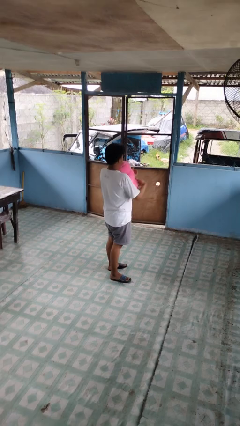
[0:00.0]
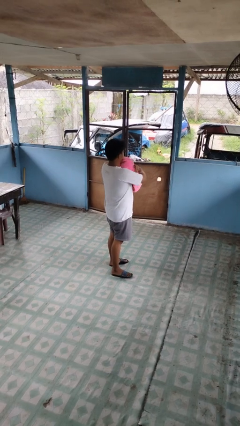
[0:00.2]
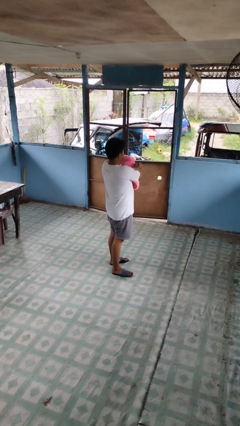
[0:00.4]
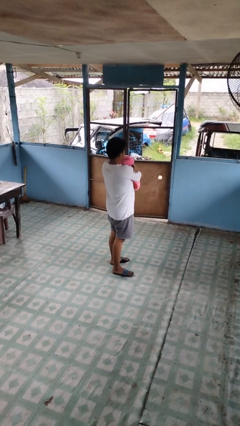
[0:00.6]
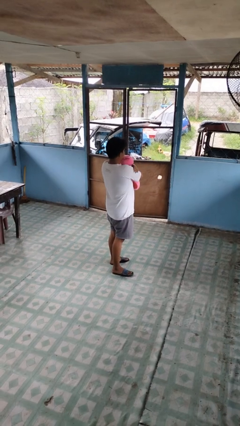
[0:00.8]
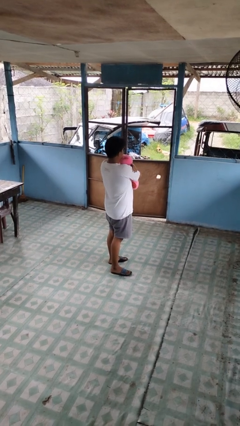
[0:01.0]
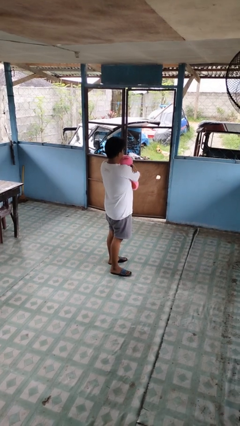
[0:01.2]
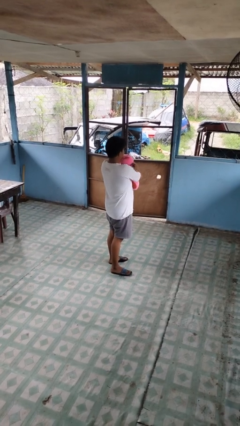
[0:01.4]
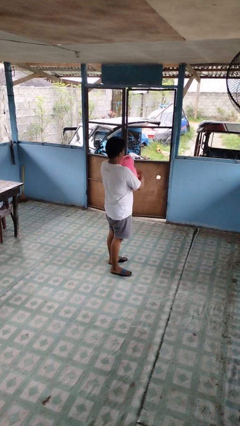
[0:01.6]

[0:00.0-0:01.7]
person hugs stuffed animal

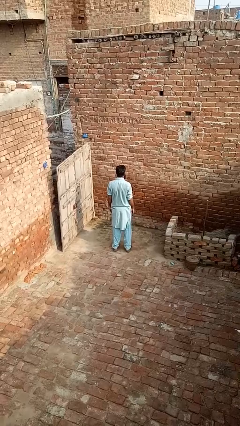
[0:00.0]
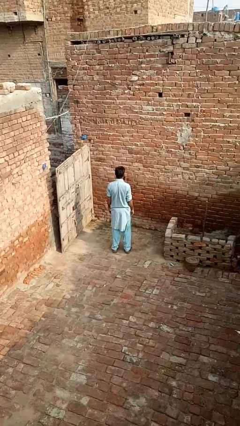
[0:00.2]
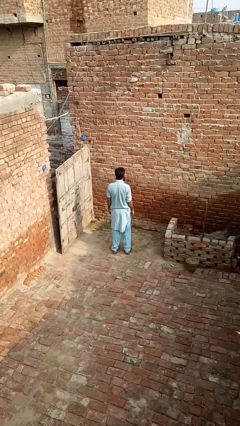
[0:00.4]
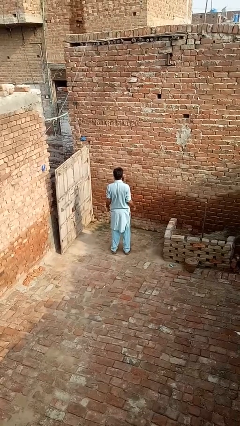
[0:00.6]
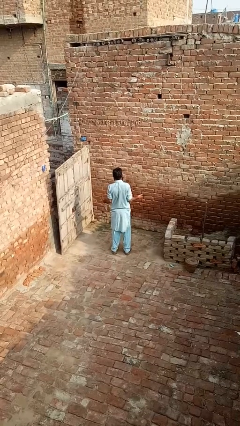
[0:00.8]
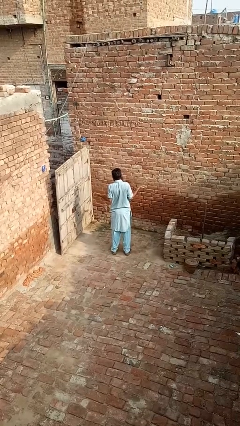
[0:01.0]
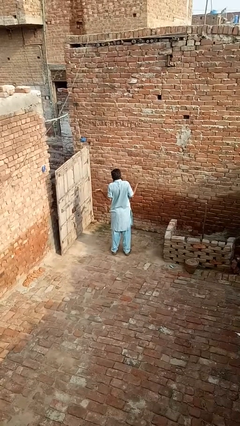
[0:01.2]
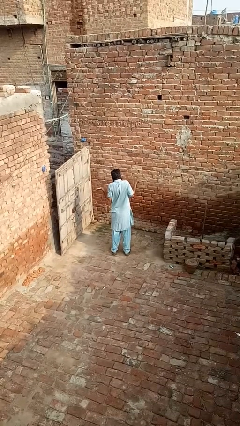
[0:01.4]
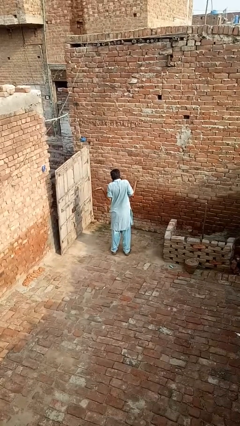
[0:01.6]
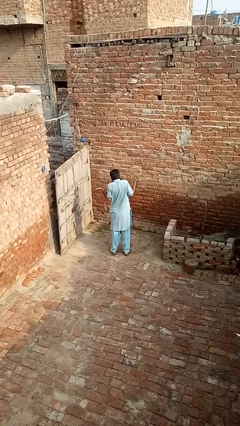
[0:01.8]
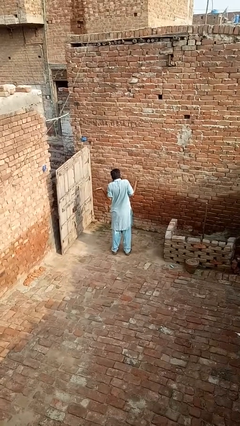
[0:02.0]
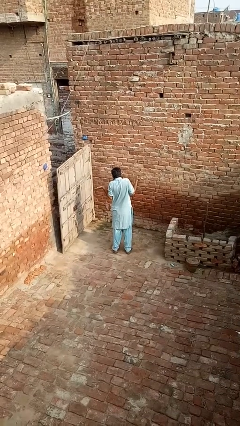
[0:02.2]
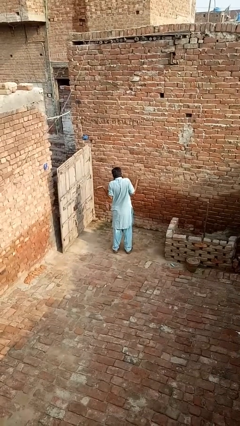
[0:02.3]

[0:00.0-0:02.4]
person shrugs

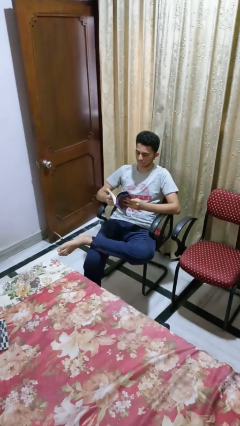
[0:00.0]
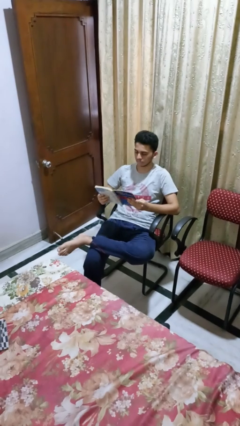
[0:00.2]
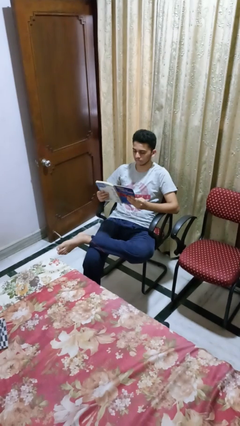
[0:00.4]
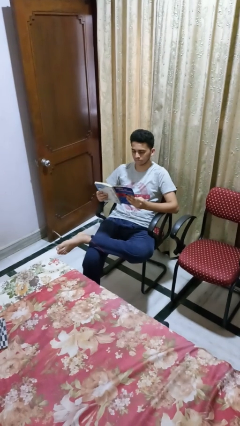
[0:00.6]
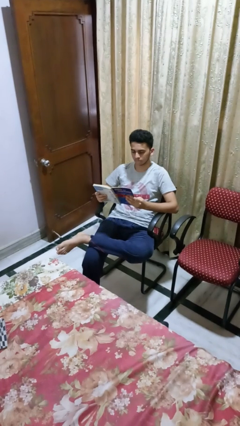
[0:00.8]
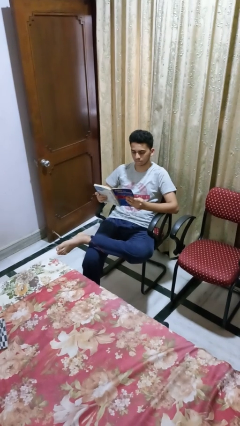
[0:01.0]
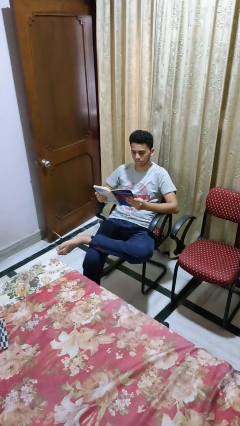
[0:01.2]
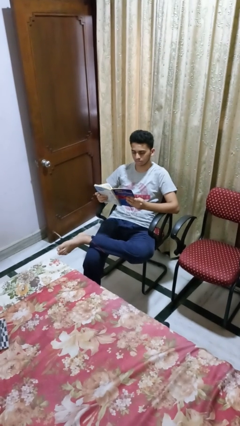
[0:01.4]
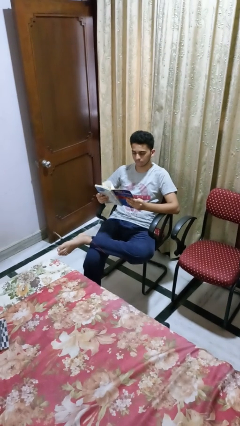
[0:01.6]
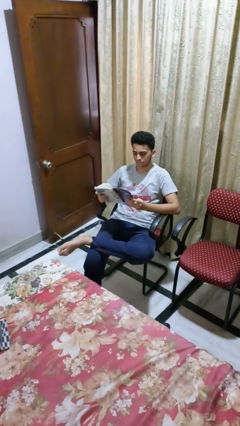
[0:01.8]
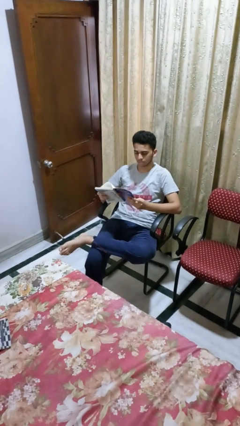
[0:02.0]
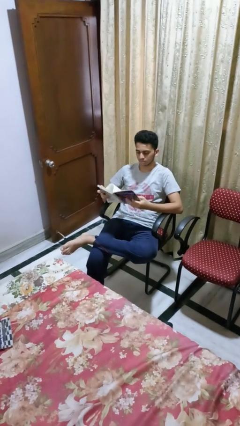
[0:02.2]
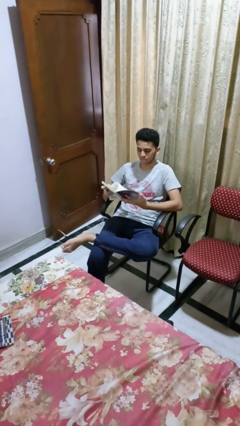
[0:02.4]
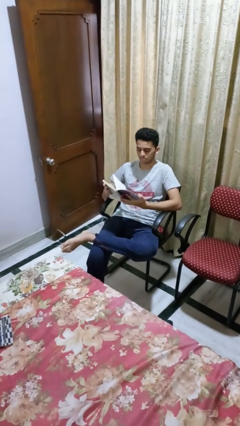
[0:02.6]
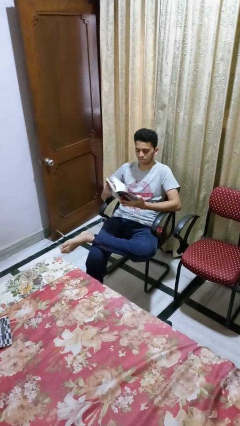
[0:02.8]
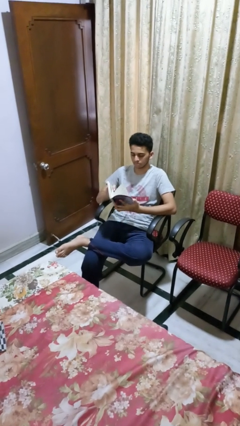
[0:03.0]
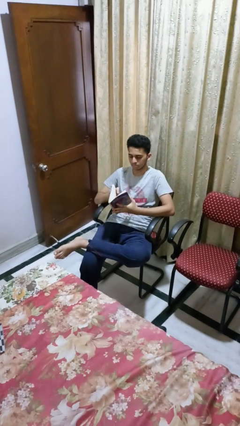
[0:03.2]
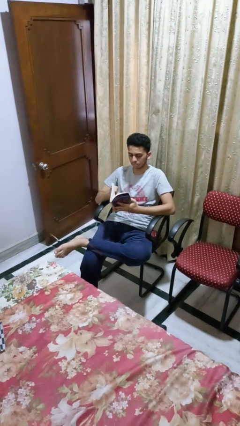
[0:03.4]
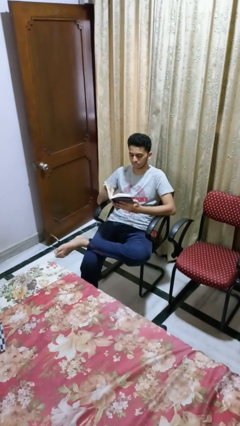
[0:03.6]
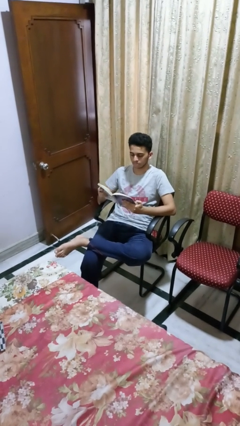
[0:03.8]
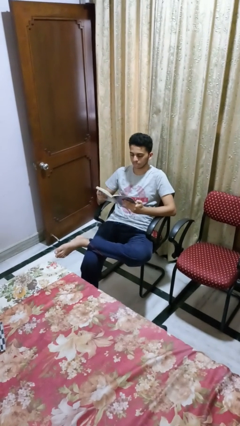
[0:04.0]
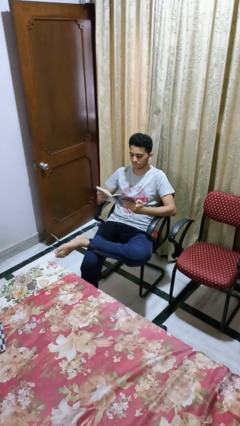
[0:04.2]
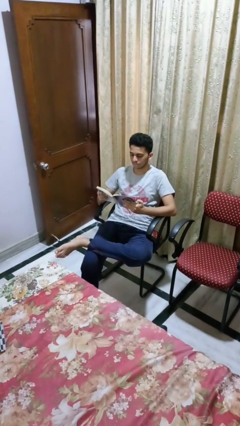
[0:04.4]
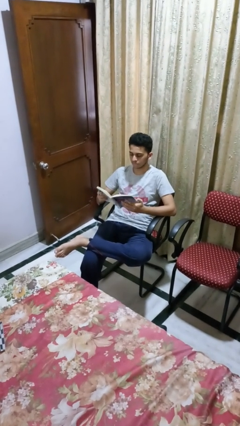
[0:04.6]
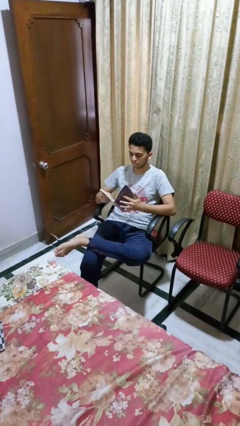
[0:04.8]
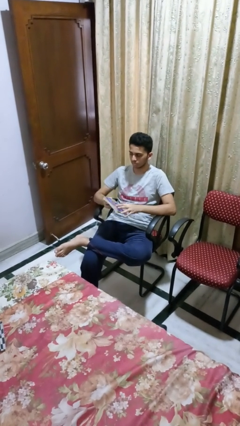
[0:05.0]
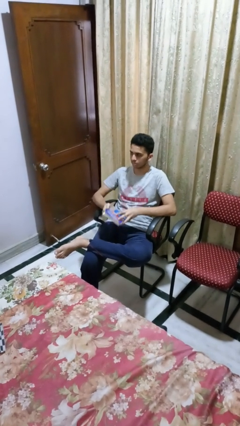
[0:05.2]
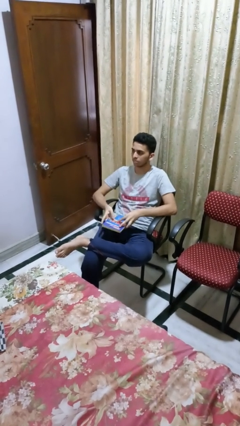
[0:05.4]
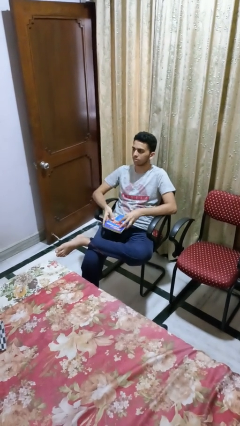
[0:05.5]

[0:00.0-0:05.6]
person reads book

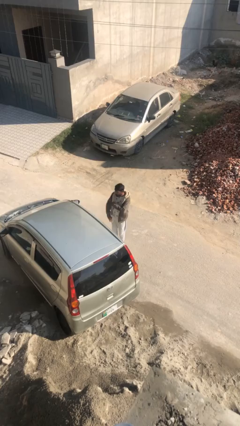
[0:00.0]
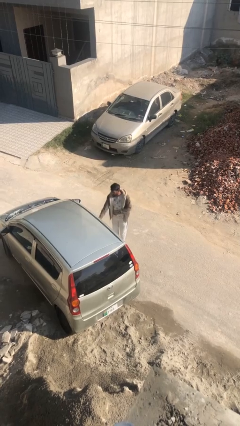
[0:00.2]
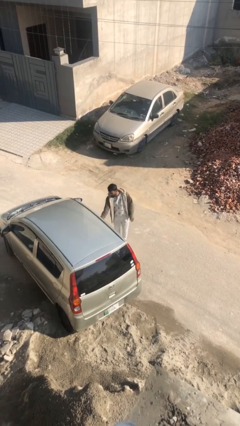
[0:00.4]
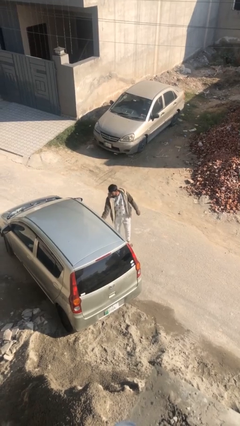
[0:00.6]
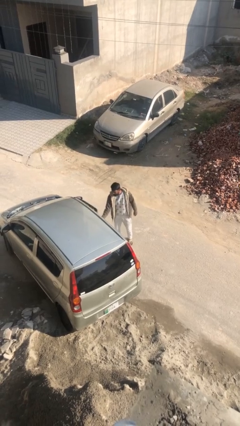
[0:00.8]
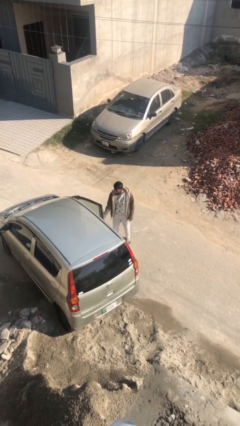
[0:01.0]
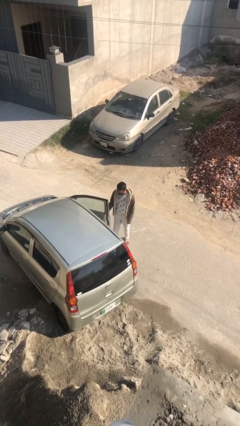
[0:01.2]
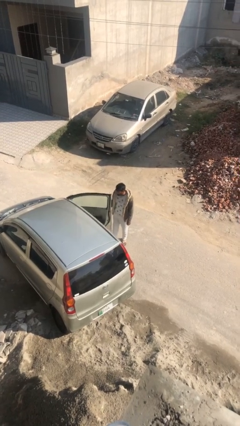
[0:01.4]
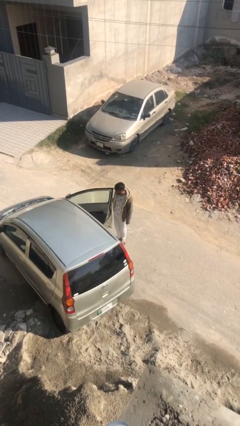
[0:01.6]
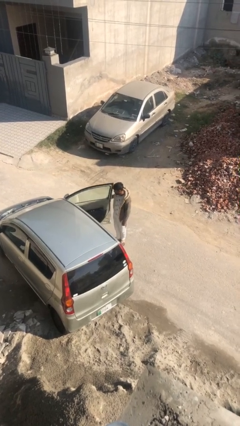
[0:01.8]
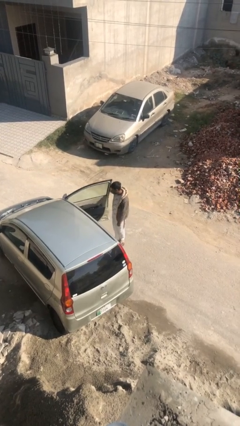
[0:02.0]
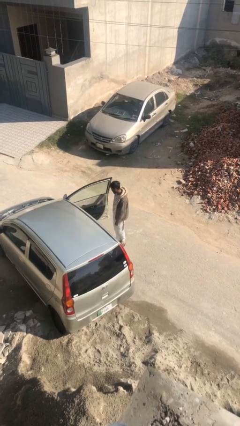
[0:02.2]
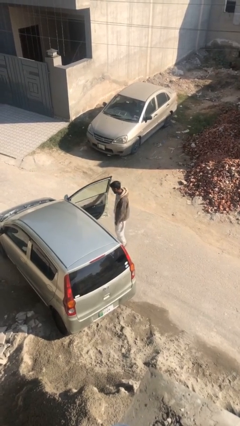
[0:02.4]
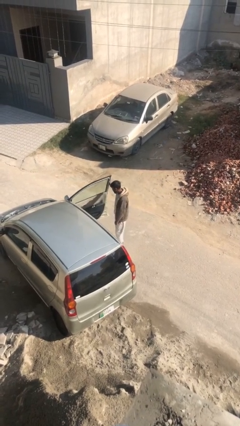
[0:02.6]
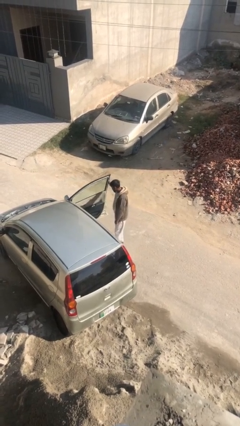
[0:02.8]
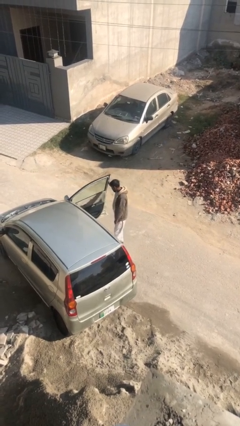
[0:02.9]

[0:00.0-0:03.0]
person opens car door

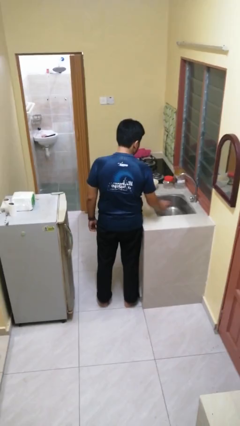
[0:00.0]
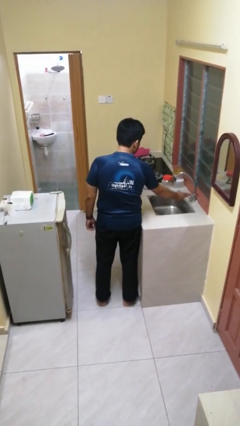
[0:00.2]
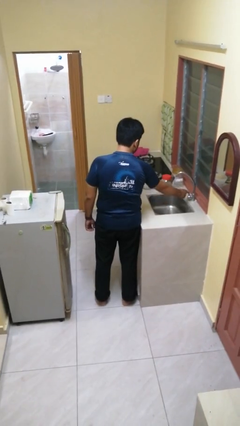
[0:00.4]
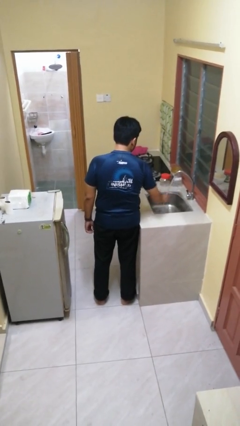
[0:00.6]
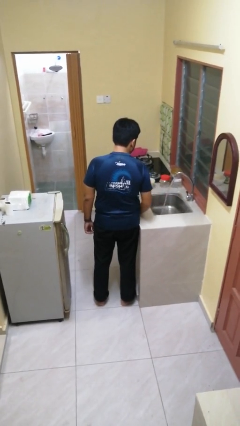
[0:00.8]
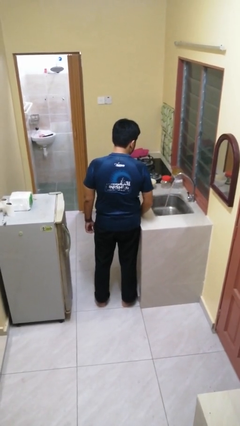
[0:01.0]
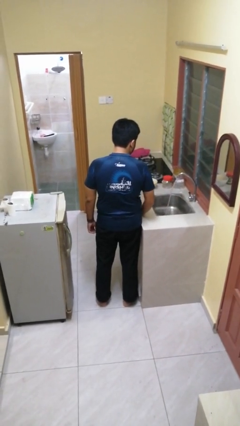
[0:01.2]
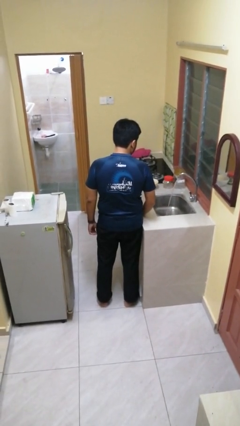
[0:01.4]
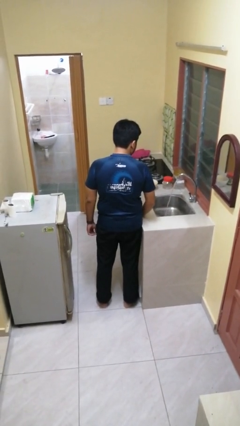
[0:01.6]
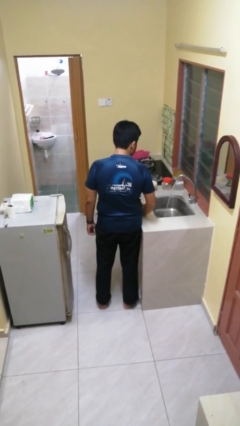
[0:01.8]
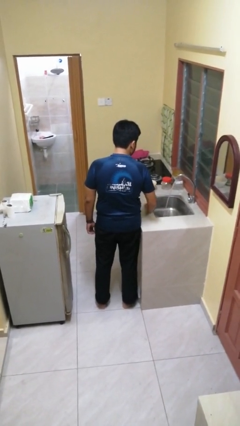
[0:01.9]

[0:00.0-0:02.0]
person turns on faucet

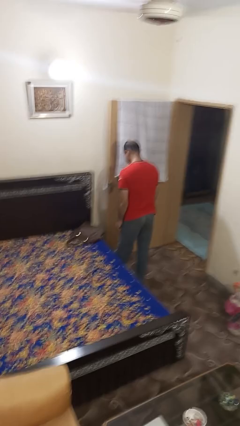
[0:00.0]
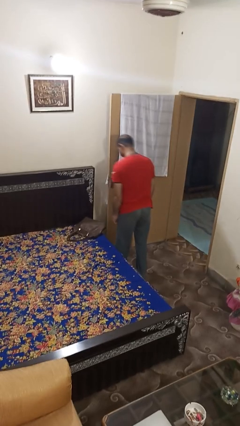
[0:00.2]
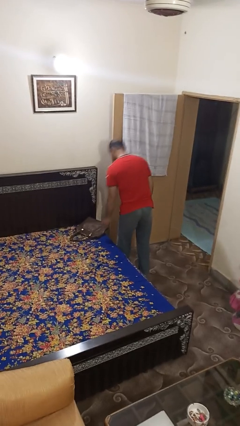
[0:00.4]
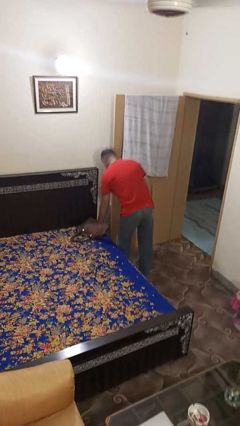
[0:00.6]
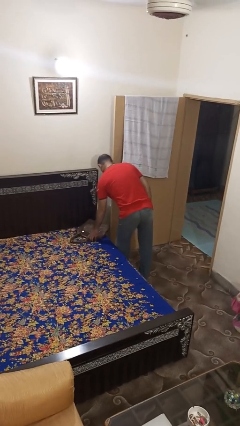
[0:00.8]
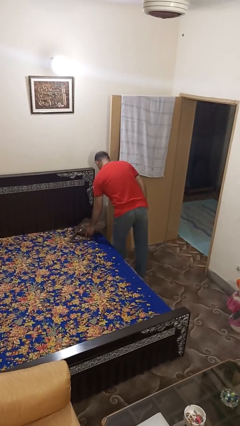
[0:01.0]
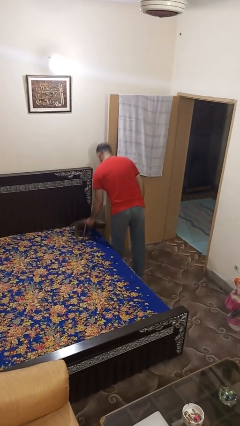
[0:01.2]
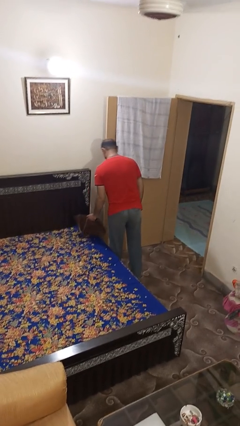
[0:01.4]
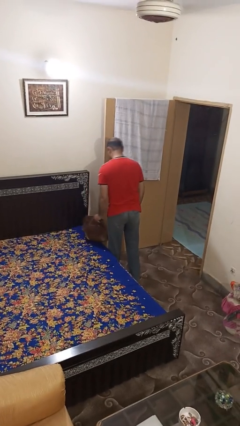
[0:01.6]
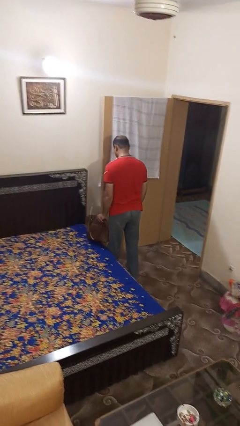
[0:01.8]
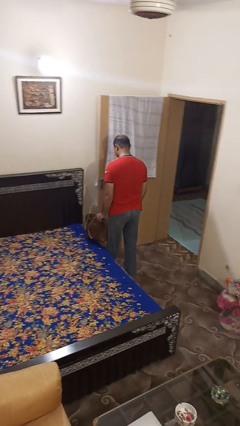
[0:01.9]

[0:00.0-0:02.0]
person picks up object from bed

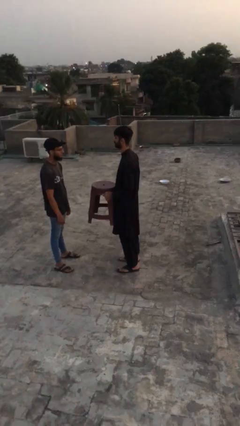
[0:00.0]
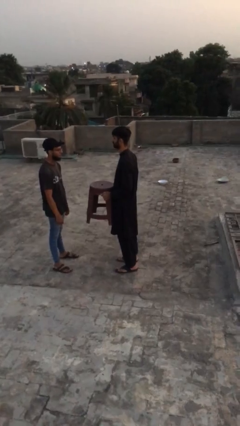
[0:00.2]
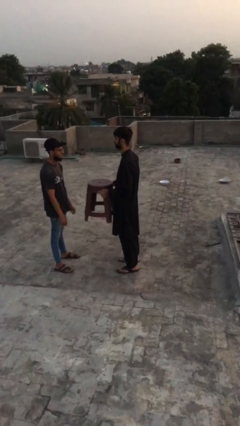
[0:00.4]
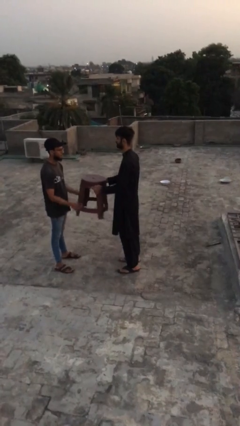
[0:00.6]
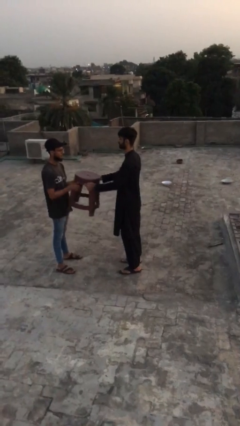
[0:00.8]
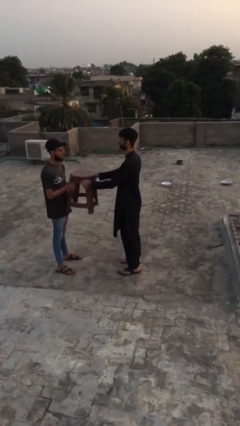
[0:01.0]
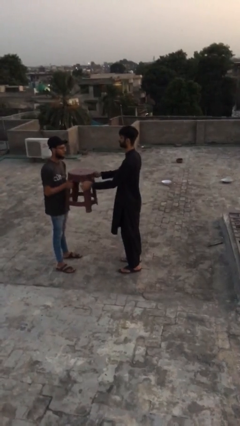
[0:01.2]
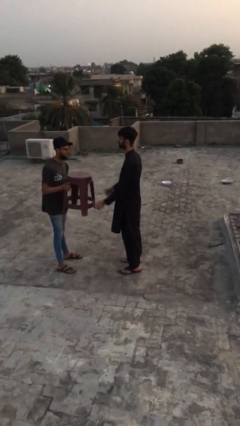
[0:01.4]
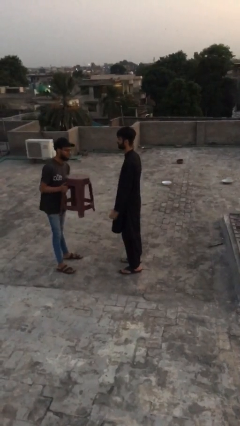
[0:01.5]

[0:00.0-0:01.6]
person transfers object to person
